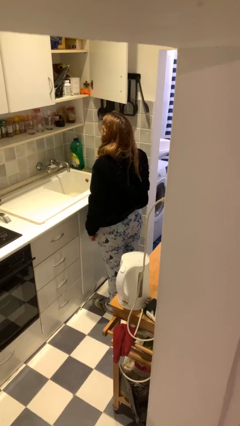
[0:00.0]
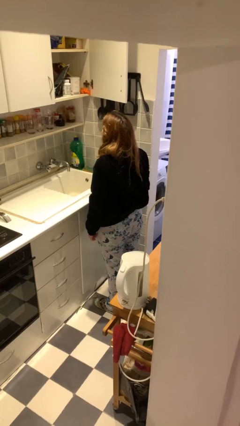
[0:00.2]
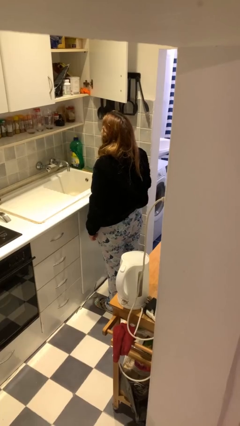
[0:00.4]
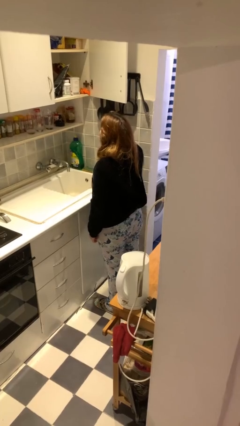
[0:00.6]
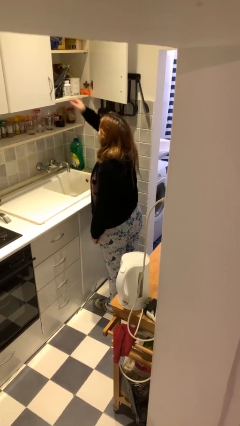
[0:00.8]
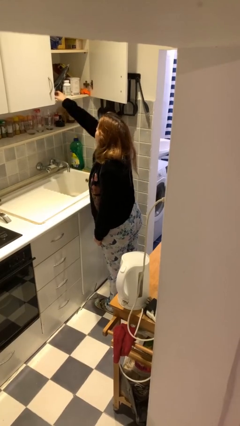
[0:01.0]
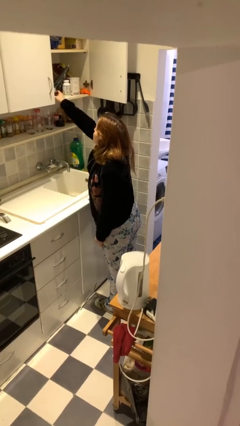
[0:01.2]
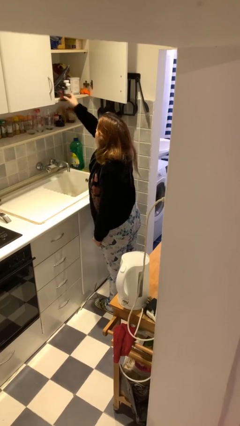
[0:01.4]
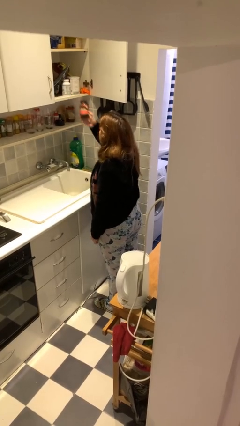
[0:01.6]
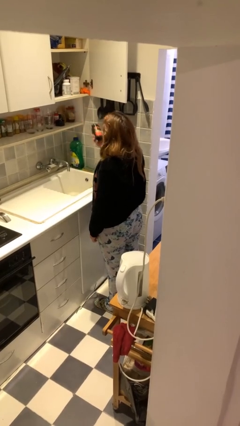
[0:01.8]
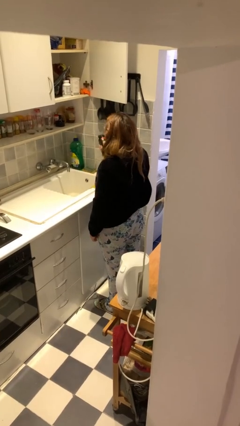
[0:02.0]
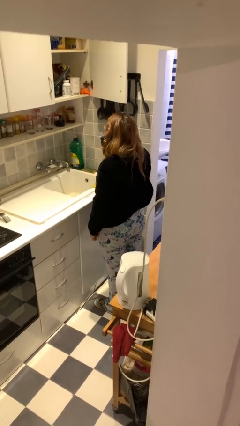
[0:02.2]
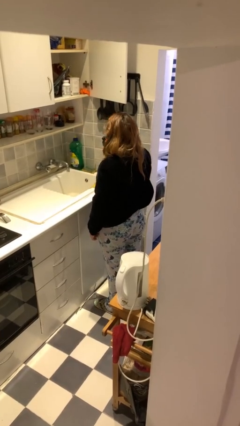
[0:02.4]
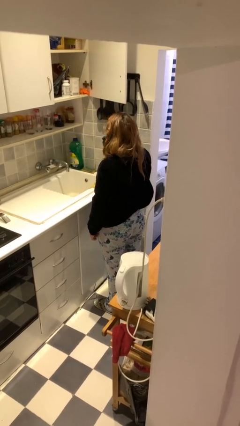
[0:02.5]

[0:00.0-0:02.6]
person takes object from cabinet

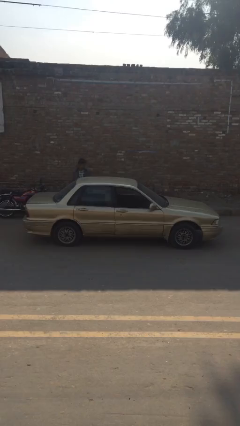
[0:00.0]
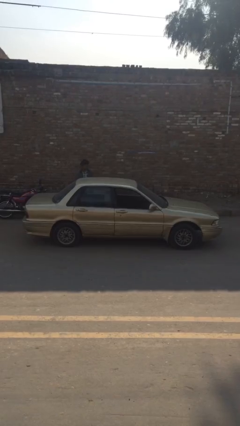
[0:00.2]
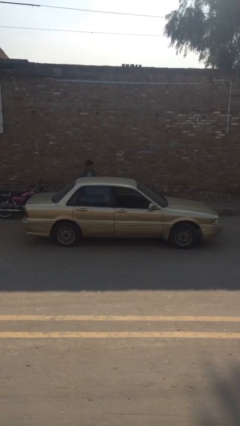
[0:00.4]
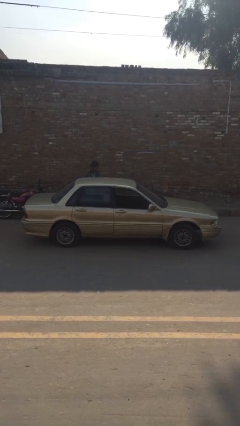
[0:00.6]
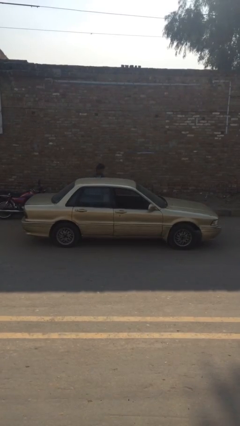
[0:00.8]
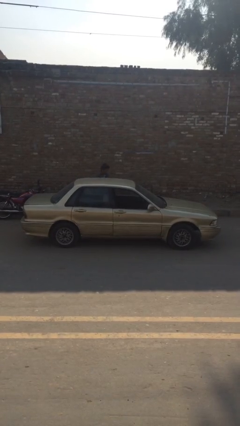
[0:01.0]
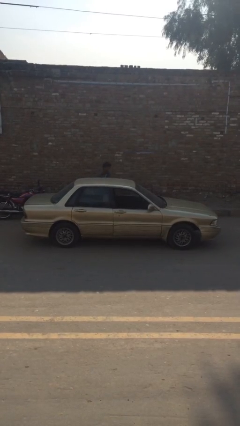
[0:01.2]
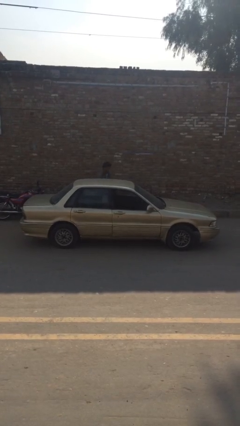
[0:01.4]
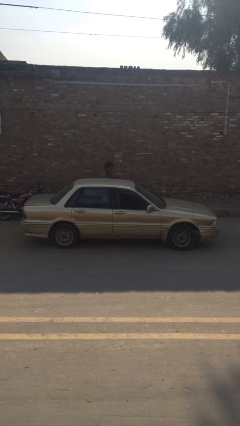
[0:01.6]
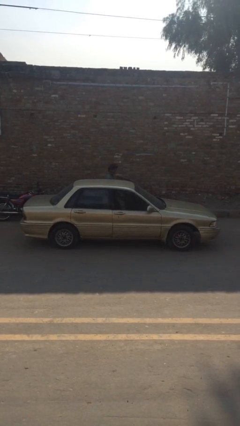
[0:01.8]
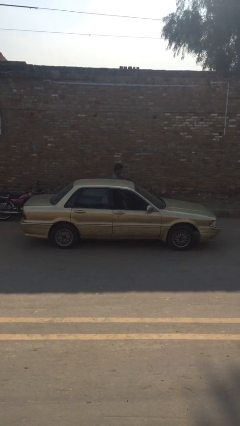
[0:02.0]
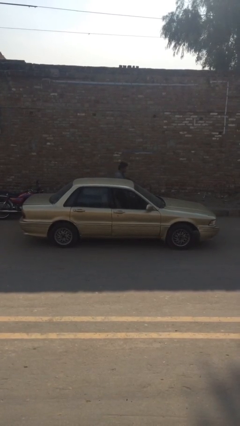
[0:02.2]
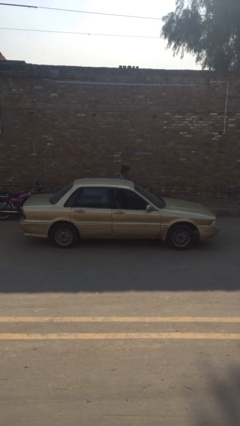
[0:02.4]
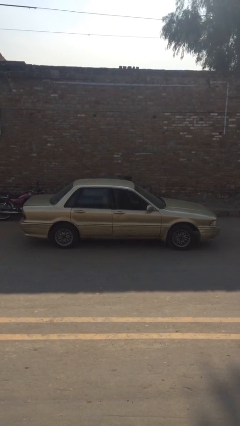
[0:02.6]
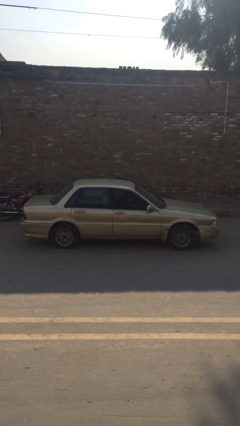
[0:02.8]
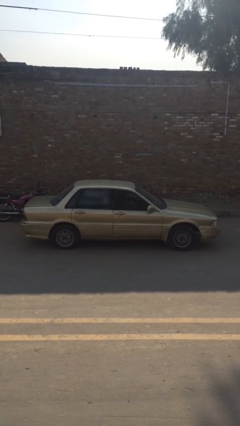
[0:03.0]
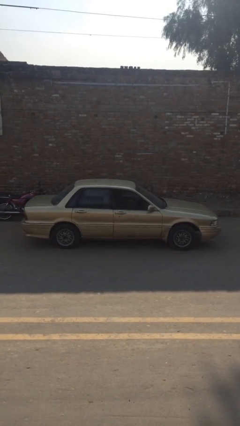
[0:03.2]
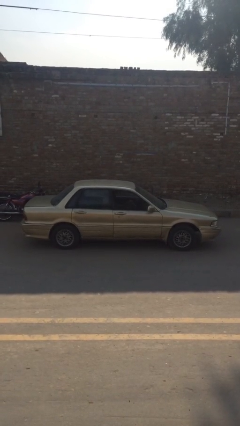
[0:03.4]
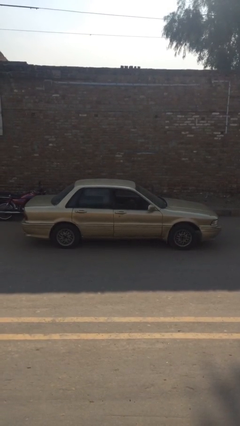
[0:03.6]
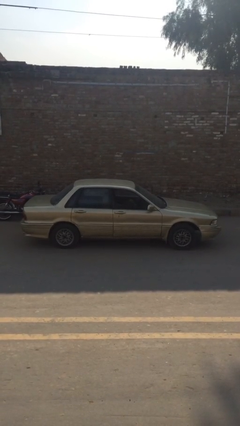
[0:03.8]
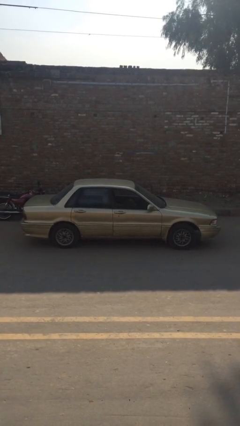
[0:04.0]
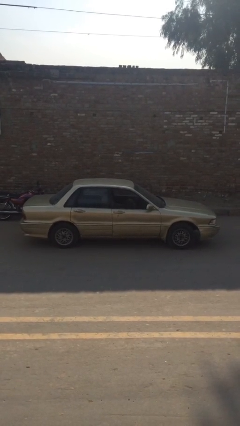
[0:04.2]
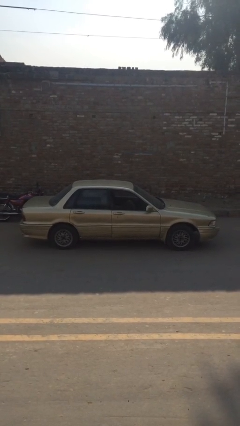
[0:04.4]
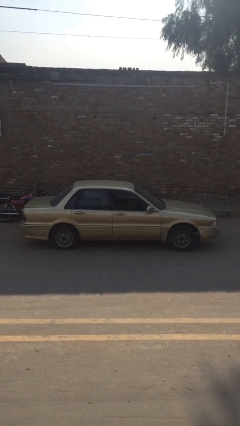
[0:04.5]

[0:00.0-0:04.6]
car picks up person

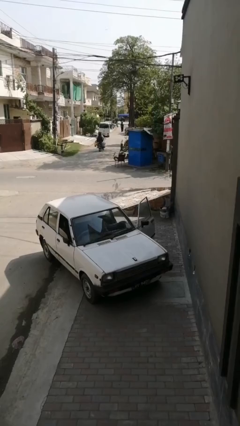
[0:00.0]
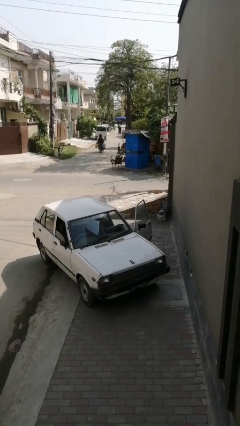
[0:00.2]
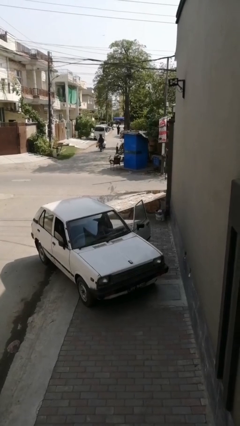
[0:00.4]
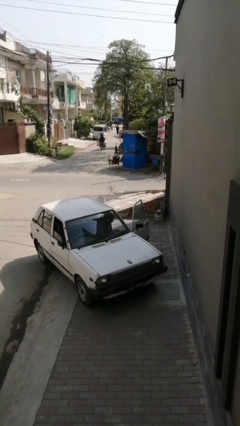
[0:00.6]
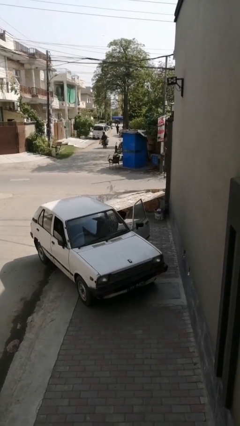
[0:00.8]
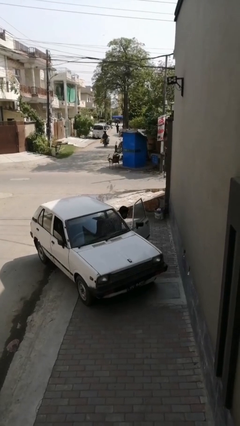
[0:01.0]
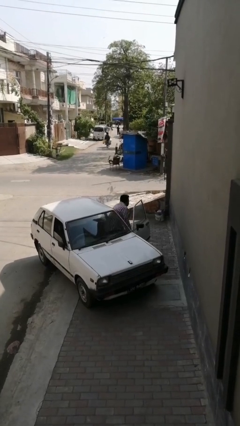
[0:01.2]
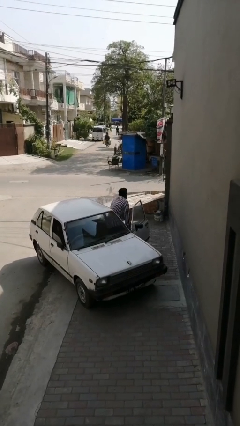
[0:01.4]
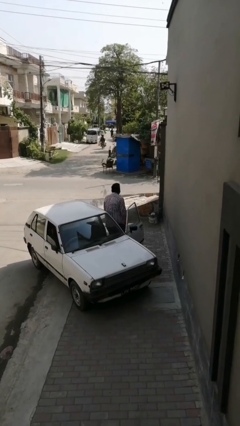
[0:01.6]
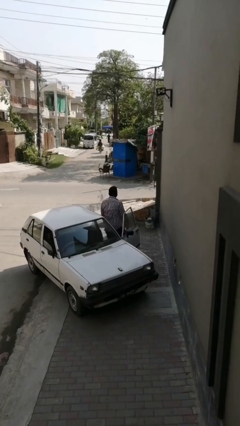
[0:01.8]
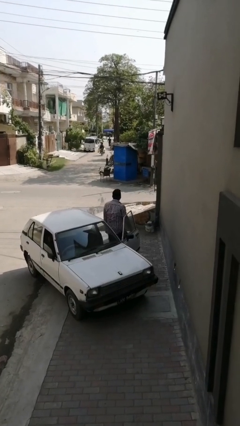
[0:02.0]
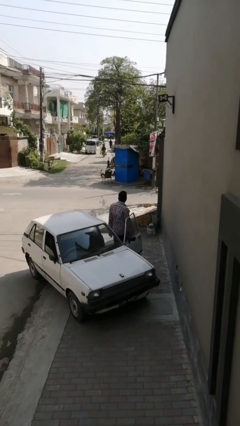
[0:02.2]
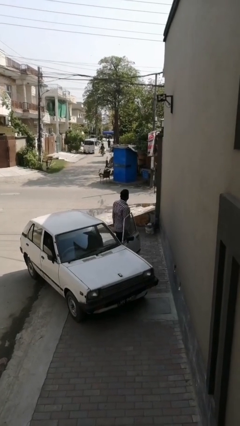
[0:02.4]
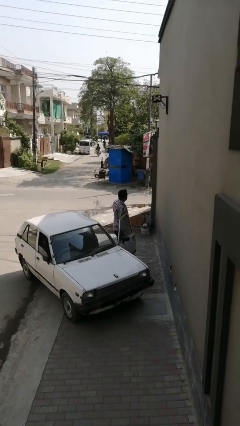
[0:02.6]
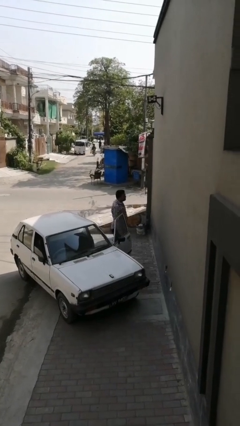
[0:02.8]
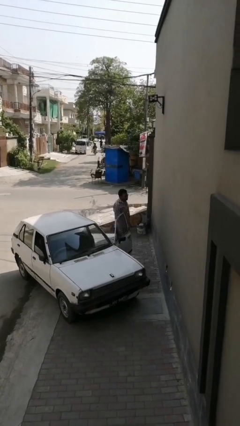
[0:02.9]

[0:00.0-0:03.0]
person exits car

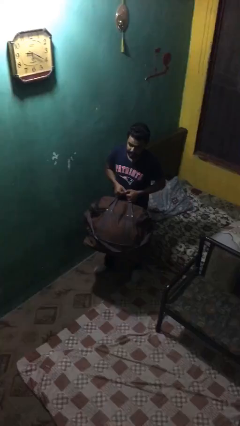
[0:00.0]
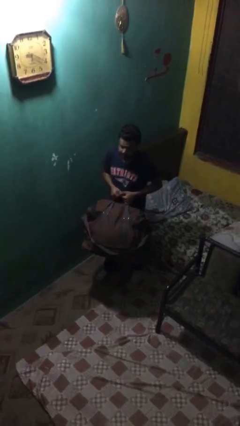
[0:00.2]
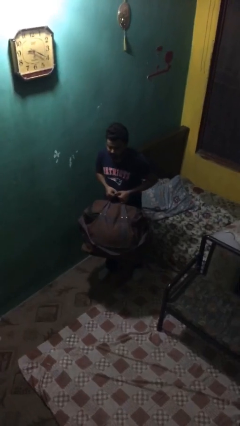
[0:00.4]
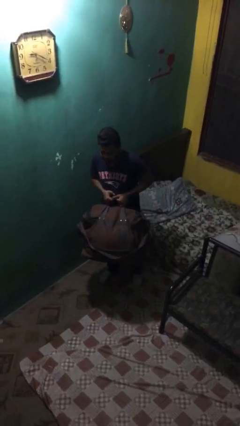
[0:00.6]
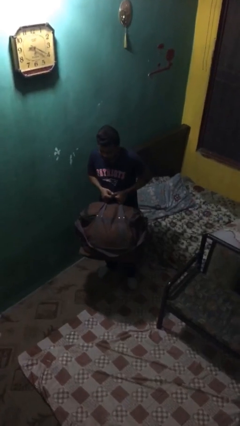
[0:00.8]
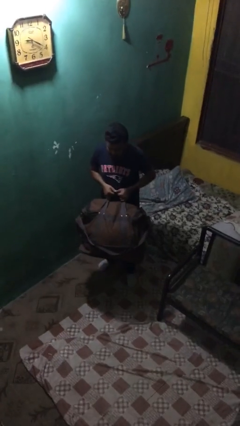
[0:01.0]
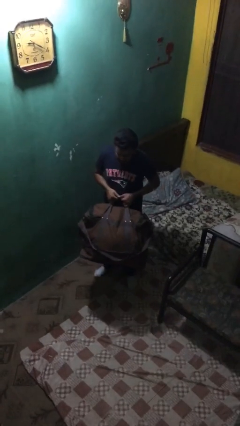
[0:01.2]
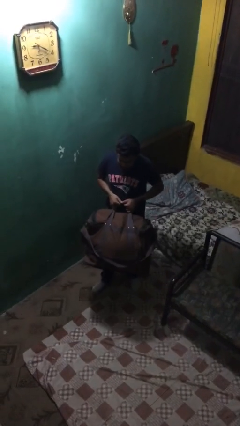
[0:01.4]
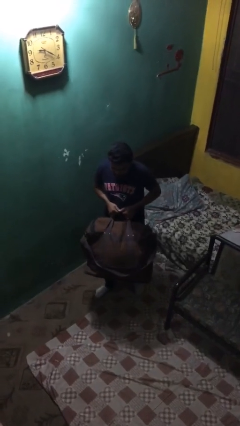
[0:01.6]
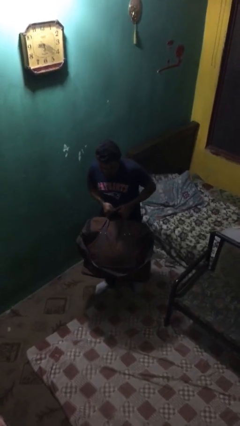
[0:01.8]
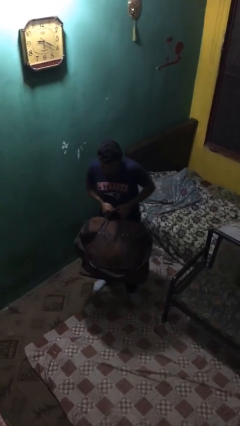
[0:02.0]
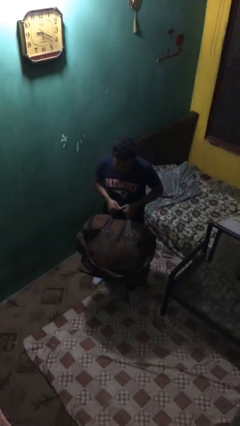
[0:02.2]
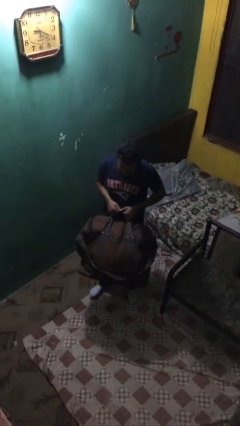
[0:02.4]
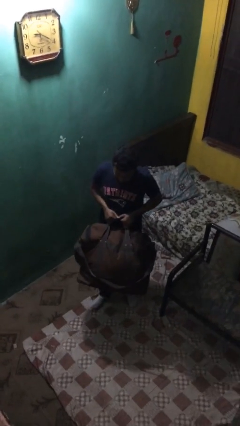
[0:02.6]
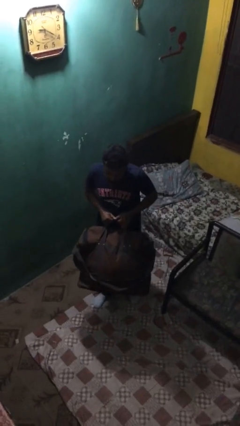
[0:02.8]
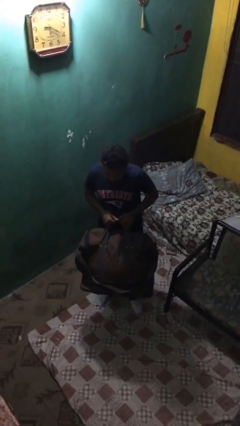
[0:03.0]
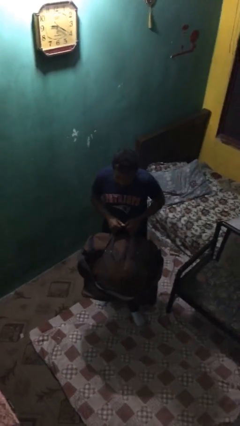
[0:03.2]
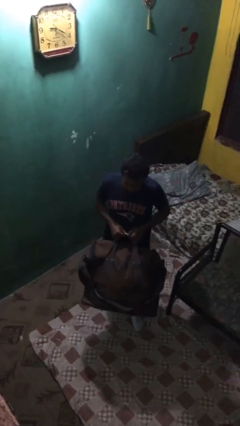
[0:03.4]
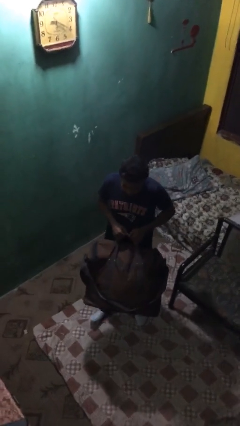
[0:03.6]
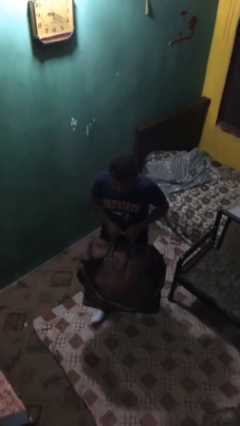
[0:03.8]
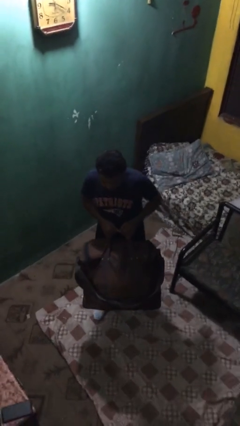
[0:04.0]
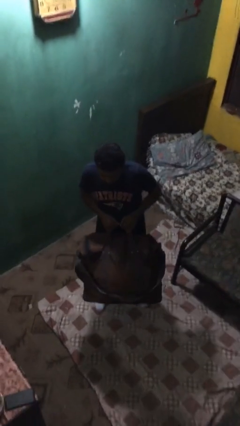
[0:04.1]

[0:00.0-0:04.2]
person carries heavy object

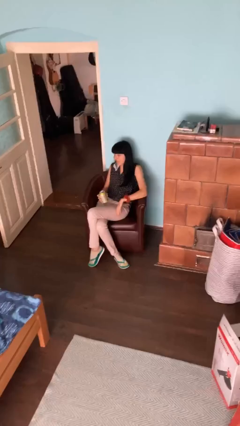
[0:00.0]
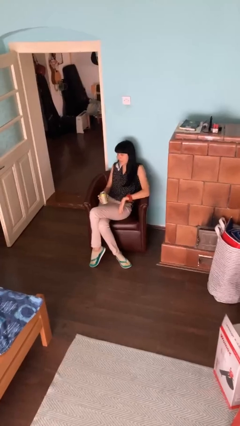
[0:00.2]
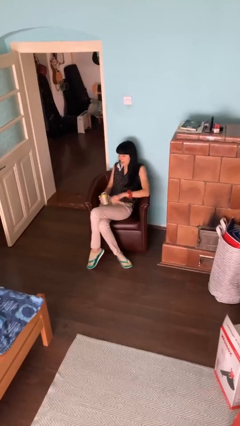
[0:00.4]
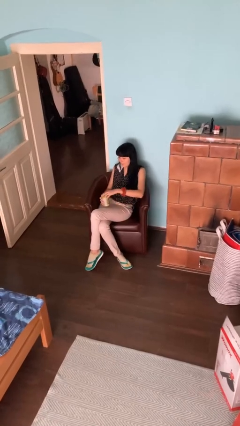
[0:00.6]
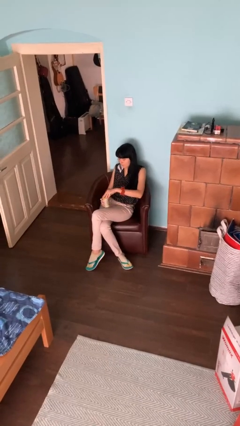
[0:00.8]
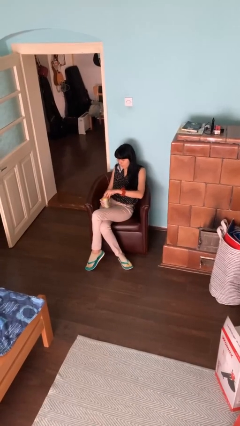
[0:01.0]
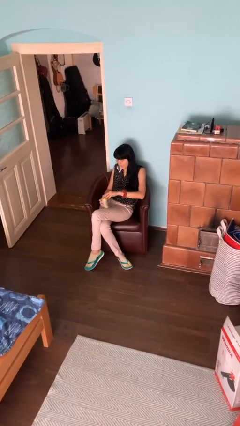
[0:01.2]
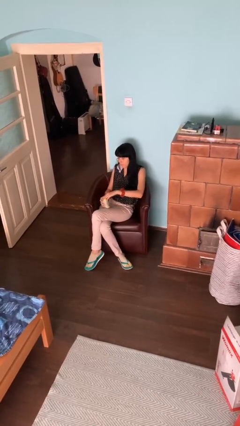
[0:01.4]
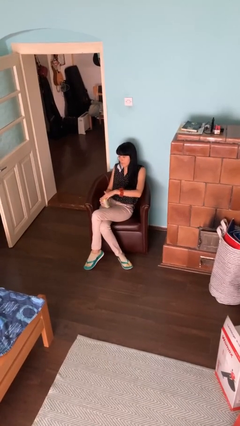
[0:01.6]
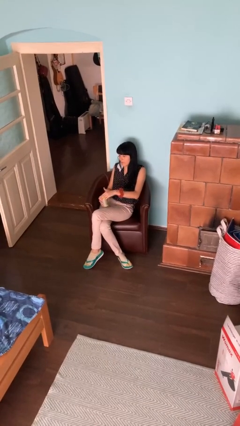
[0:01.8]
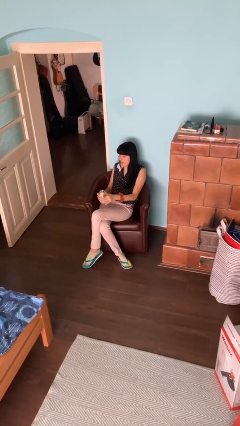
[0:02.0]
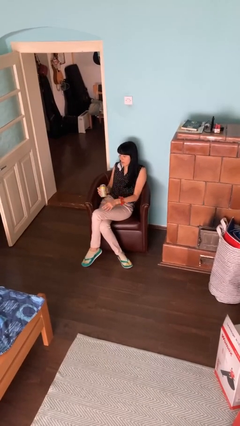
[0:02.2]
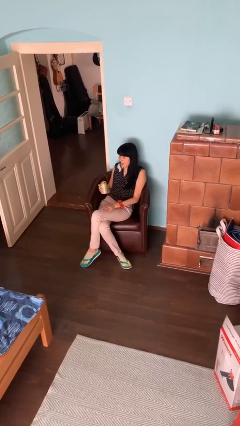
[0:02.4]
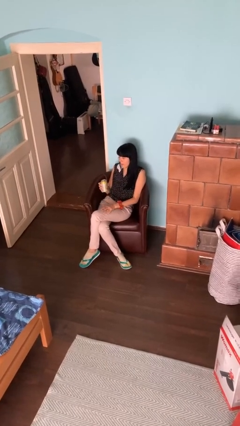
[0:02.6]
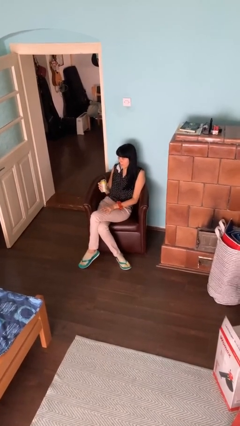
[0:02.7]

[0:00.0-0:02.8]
person opens beverage can

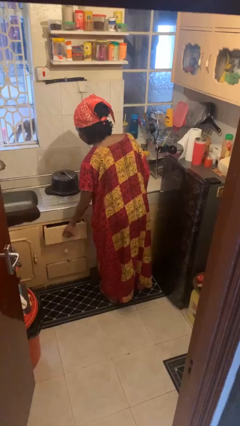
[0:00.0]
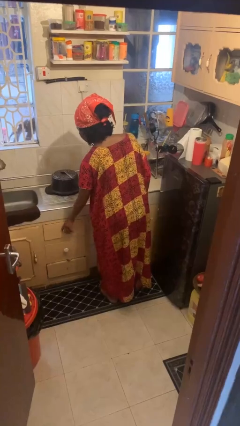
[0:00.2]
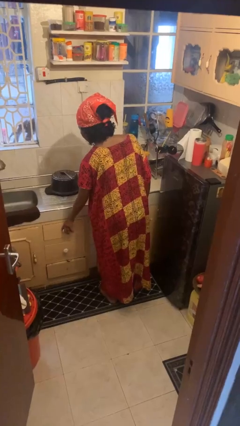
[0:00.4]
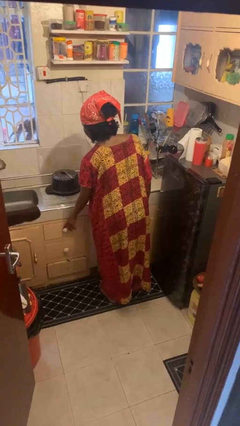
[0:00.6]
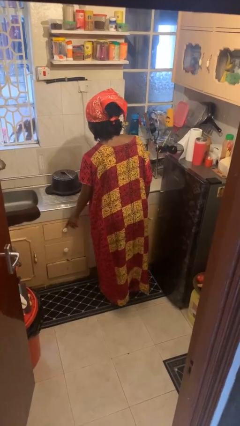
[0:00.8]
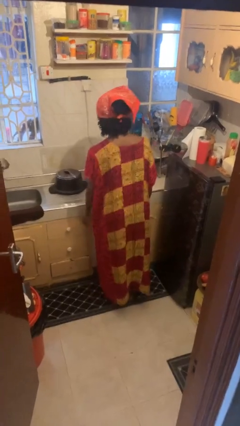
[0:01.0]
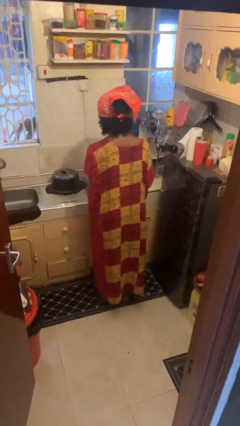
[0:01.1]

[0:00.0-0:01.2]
person closes kitchen drawer
